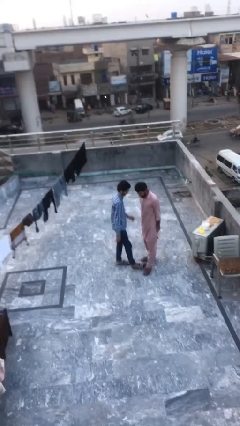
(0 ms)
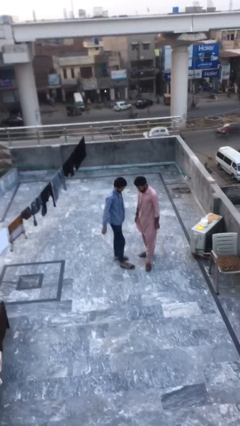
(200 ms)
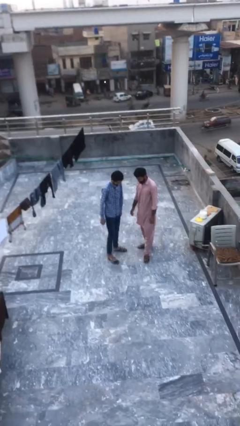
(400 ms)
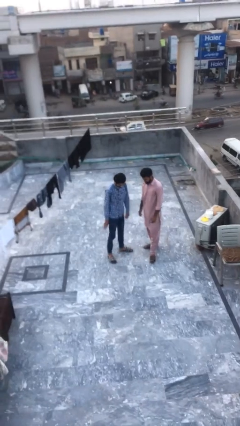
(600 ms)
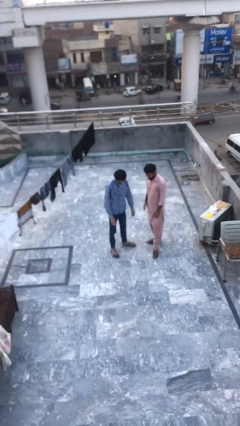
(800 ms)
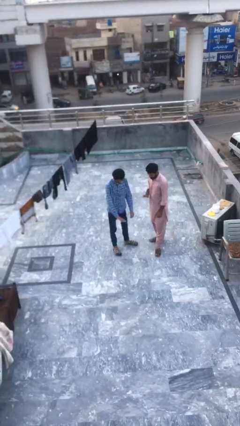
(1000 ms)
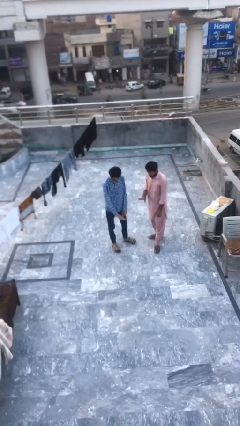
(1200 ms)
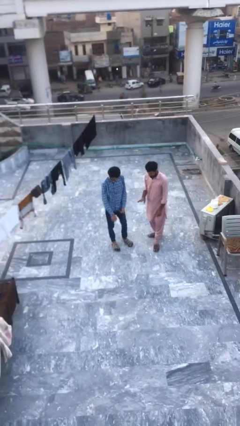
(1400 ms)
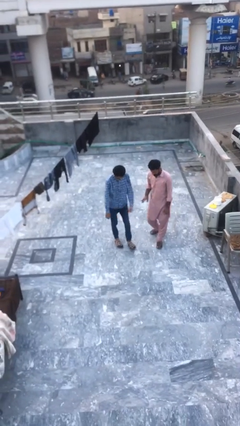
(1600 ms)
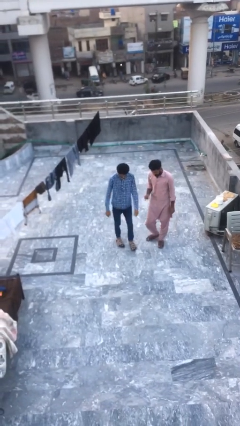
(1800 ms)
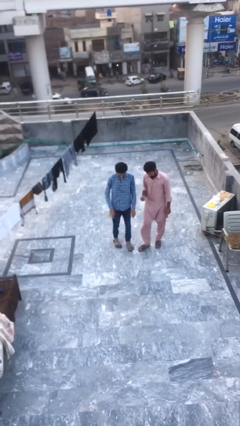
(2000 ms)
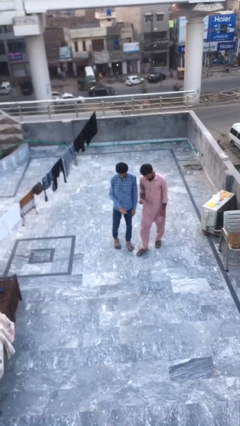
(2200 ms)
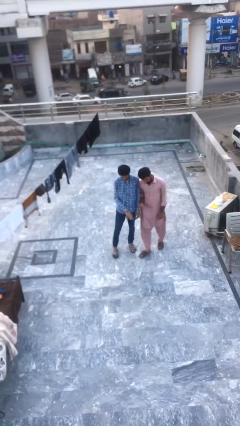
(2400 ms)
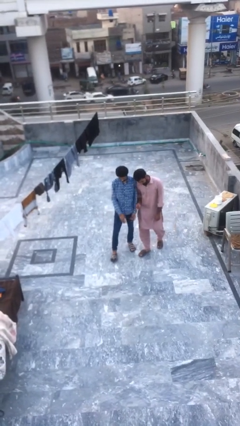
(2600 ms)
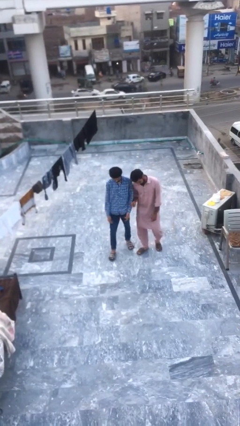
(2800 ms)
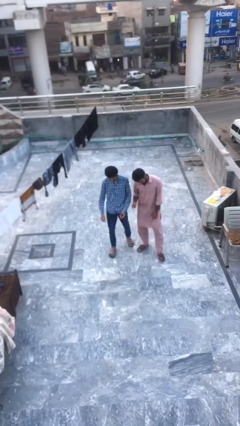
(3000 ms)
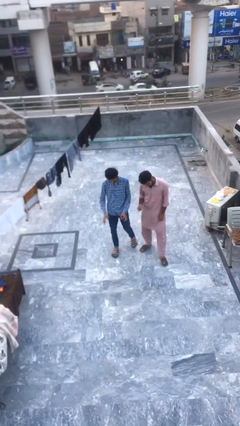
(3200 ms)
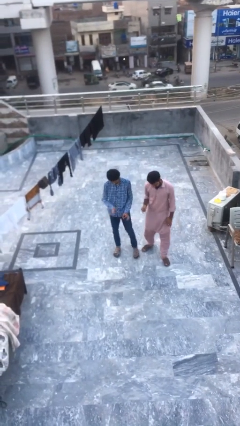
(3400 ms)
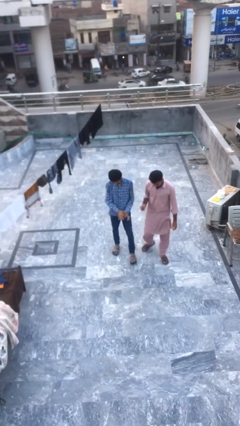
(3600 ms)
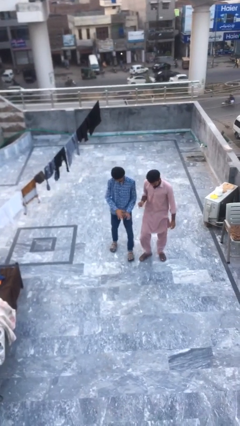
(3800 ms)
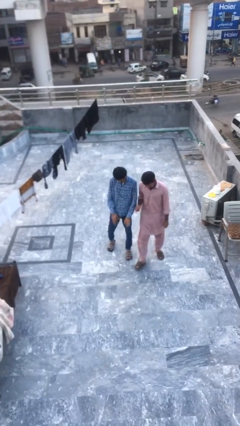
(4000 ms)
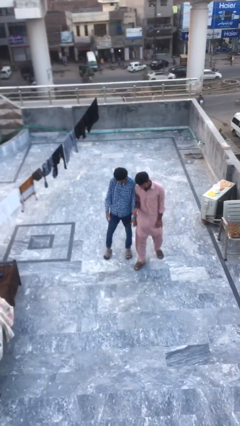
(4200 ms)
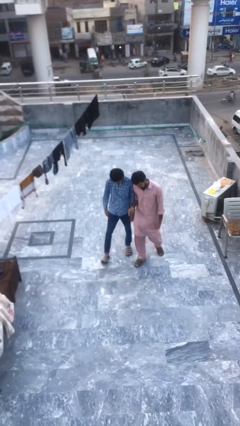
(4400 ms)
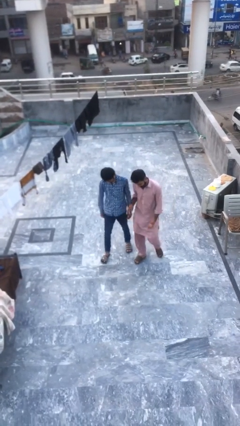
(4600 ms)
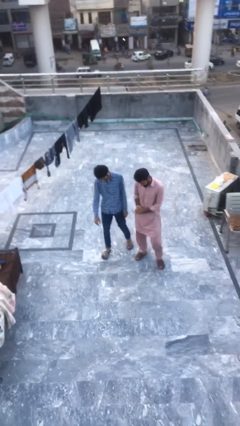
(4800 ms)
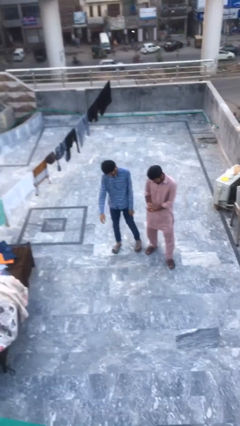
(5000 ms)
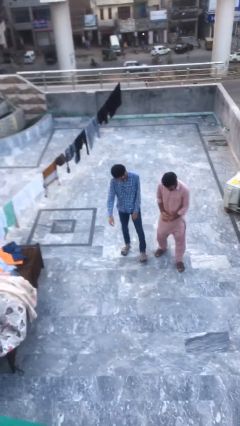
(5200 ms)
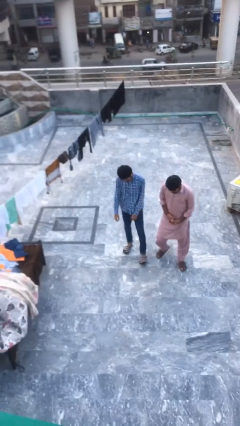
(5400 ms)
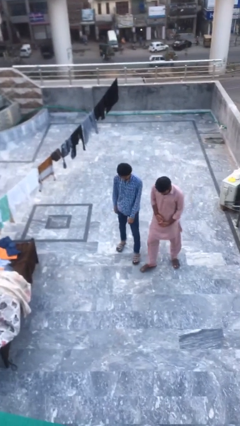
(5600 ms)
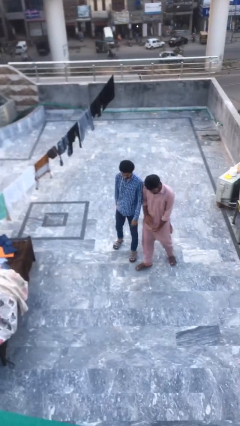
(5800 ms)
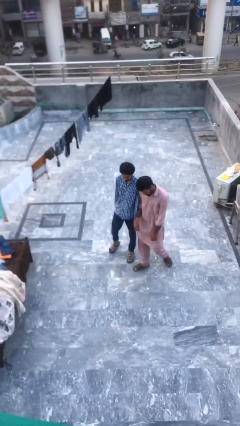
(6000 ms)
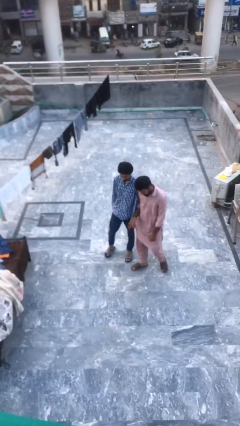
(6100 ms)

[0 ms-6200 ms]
person talks to person

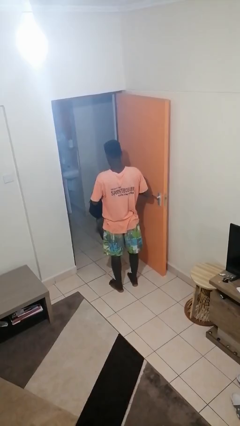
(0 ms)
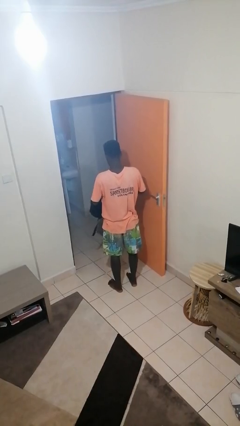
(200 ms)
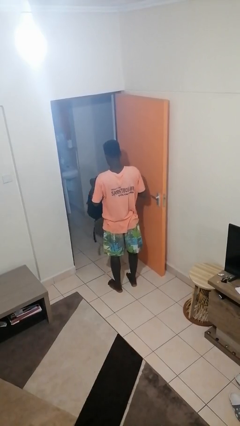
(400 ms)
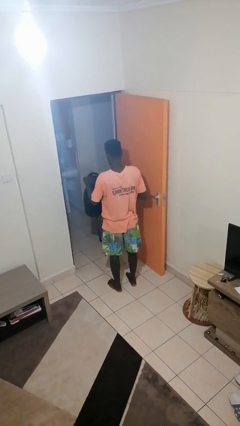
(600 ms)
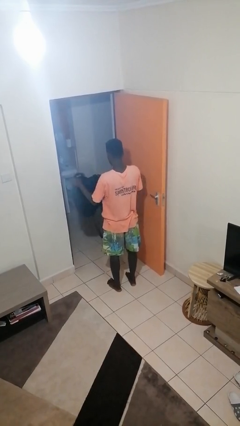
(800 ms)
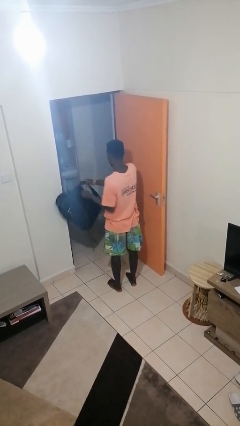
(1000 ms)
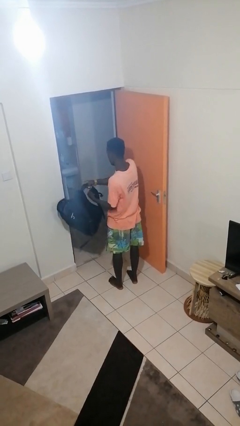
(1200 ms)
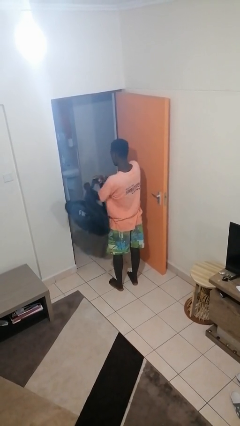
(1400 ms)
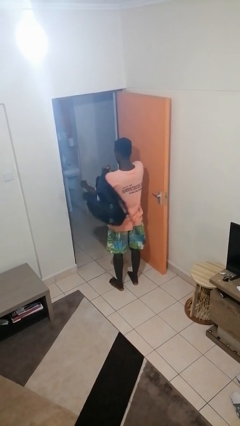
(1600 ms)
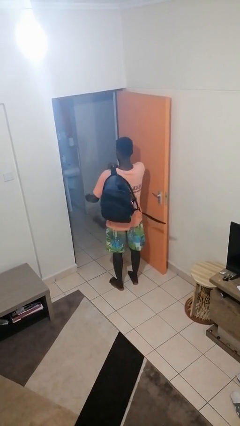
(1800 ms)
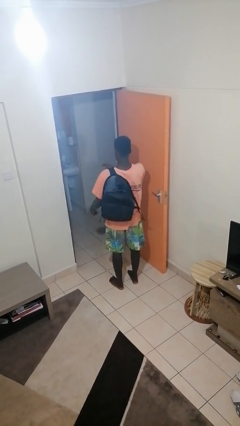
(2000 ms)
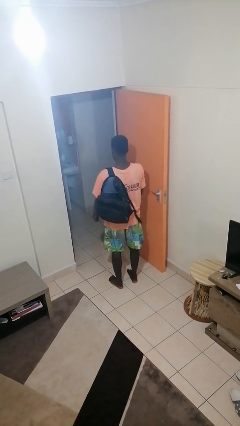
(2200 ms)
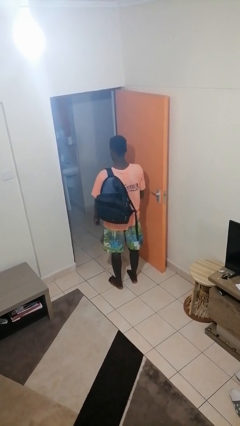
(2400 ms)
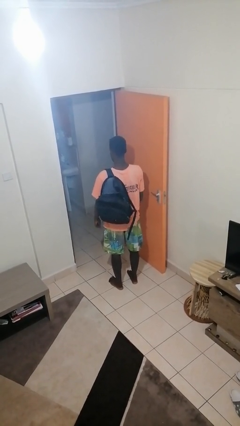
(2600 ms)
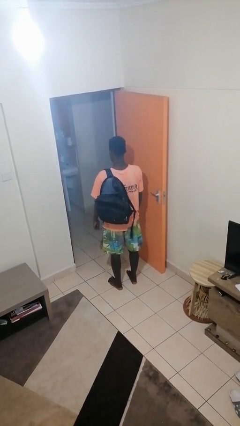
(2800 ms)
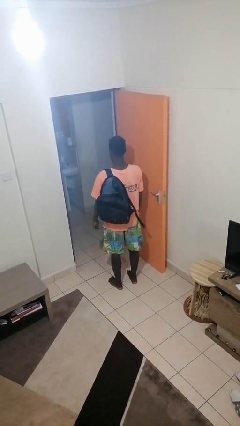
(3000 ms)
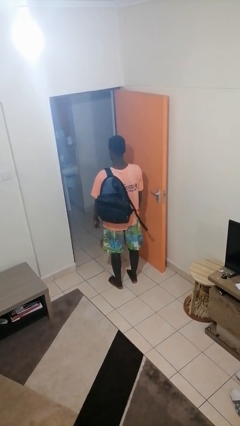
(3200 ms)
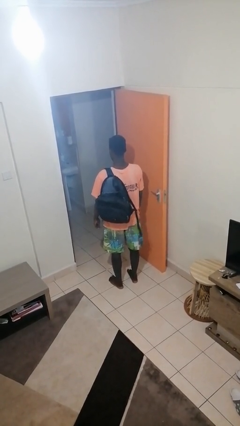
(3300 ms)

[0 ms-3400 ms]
person puts object into backpack

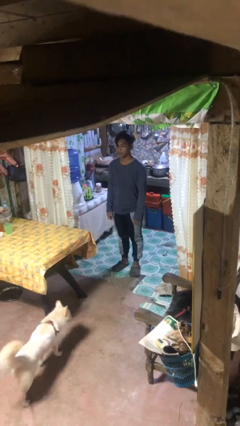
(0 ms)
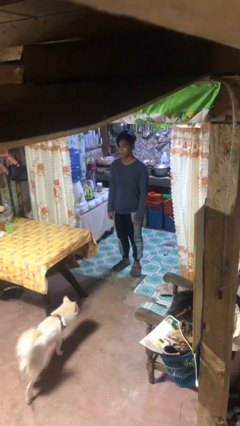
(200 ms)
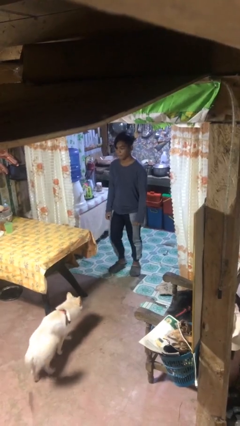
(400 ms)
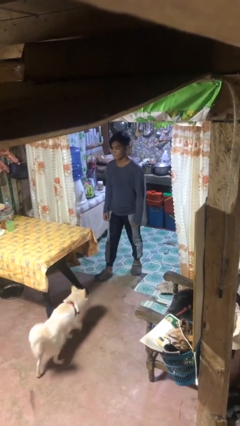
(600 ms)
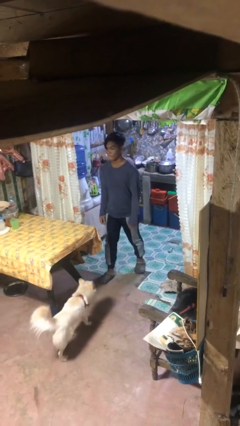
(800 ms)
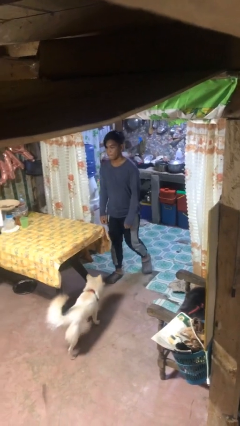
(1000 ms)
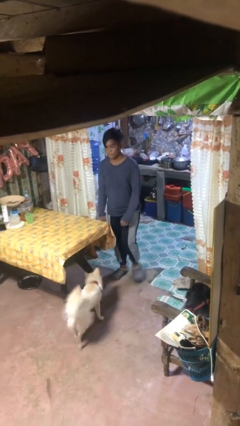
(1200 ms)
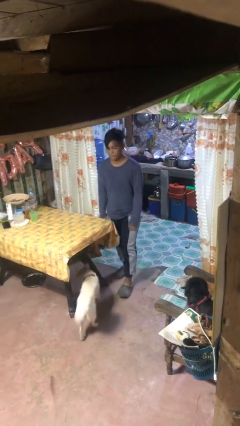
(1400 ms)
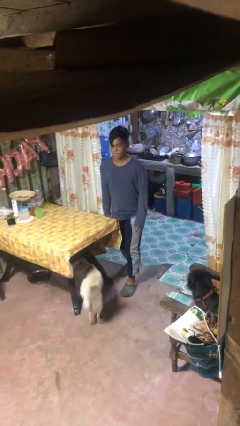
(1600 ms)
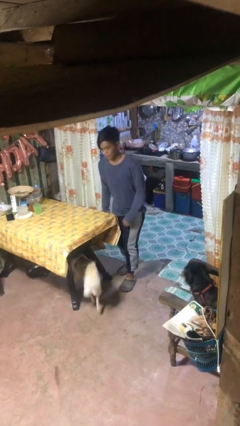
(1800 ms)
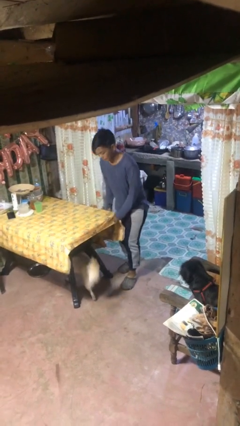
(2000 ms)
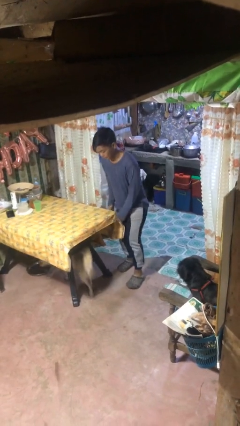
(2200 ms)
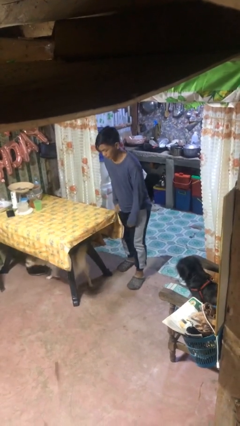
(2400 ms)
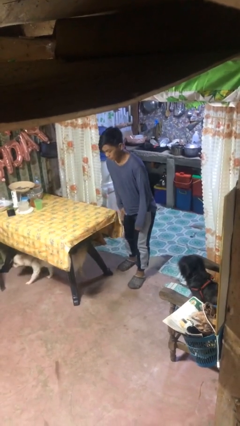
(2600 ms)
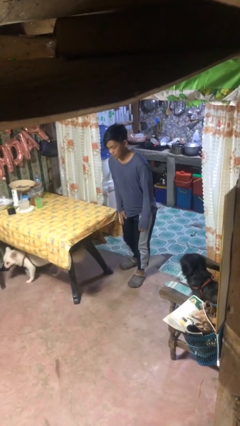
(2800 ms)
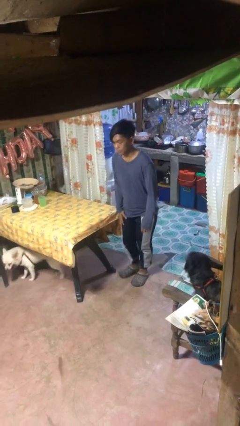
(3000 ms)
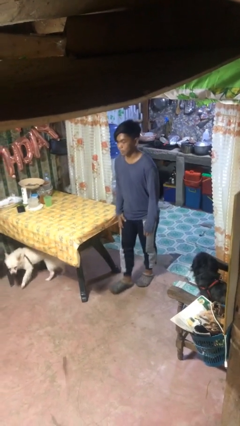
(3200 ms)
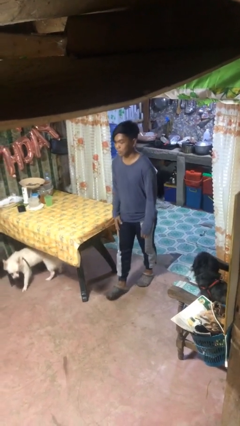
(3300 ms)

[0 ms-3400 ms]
person bumps into table

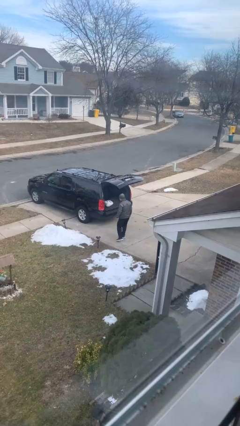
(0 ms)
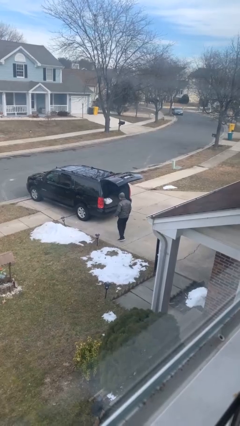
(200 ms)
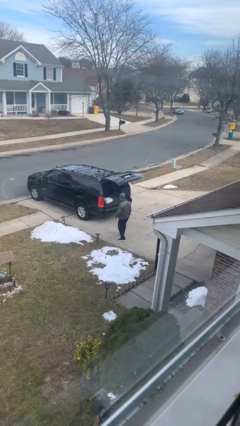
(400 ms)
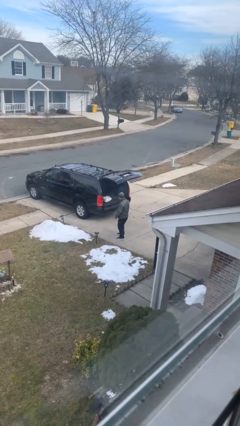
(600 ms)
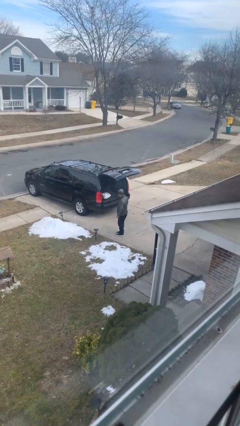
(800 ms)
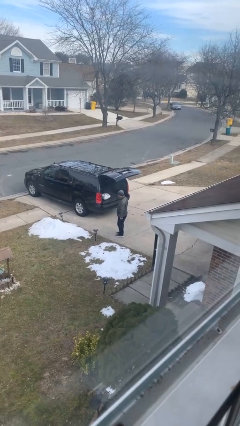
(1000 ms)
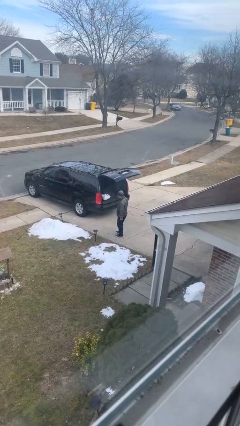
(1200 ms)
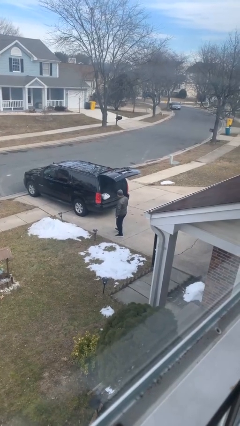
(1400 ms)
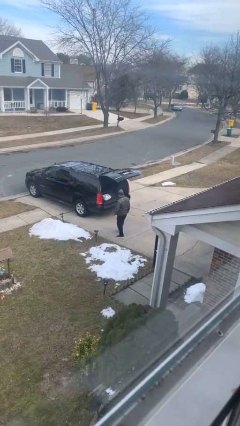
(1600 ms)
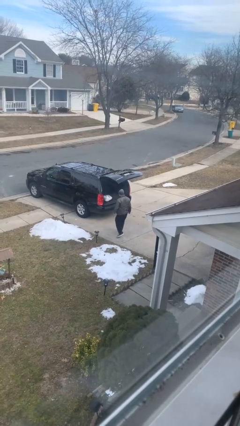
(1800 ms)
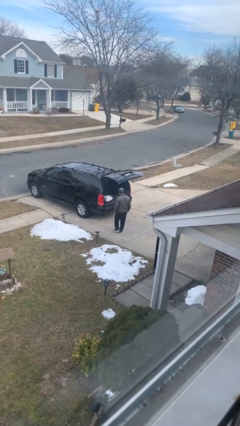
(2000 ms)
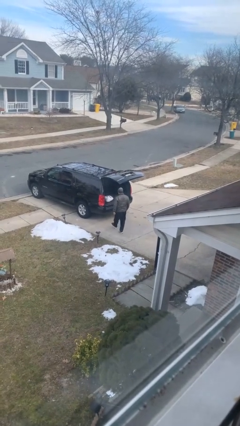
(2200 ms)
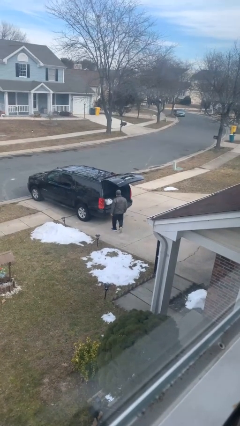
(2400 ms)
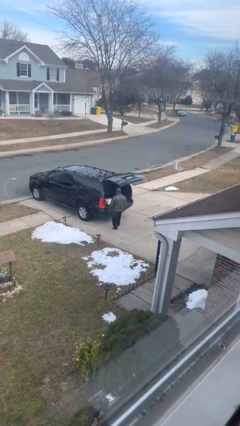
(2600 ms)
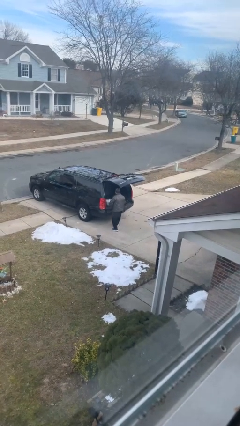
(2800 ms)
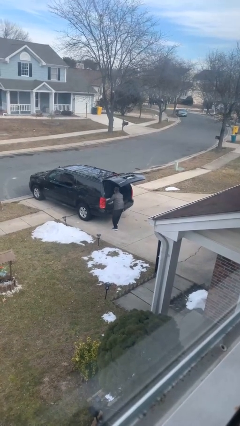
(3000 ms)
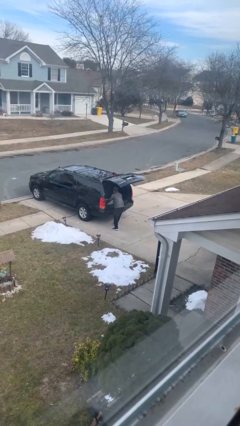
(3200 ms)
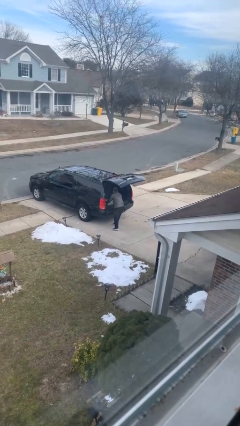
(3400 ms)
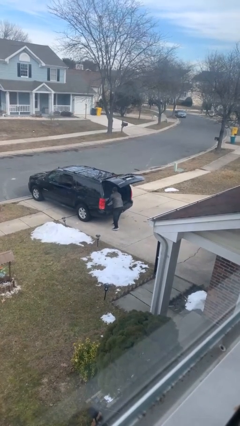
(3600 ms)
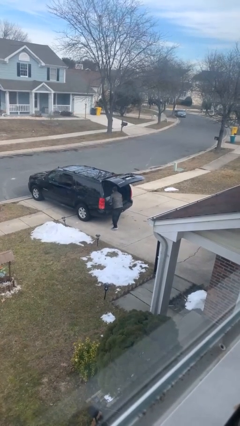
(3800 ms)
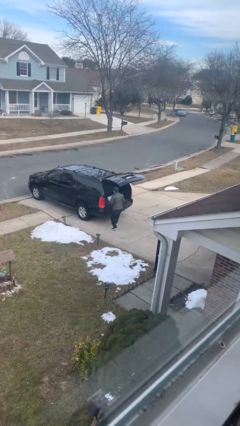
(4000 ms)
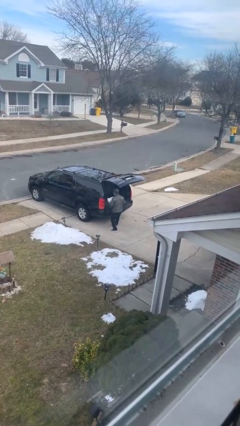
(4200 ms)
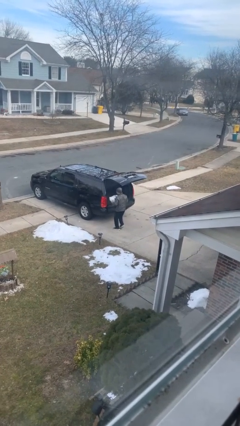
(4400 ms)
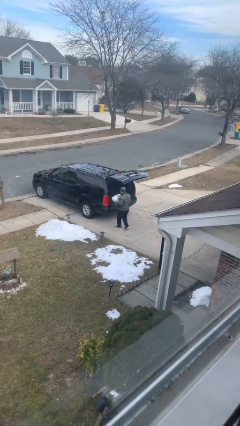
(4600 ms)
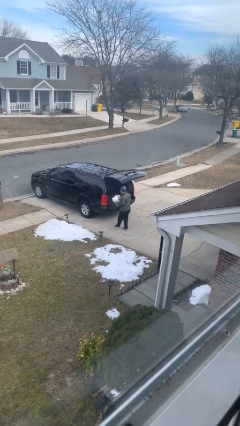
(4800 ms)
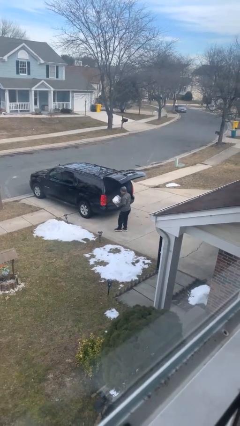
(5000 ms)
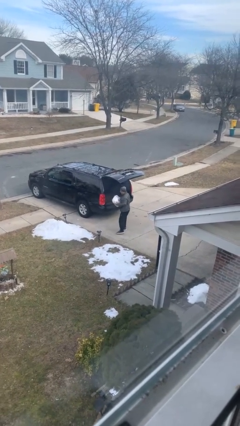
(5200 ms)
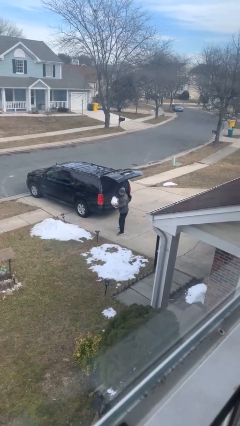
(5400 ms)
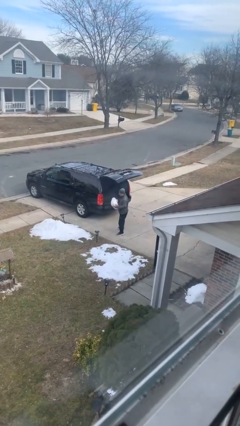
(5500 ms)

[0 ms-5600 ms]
person unloads car
